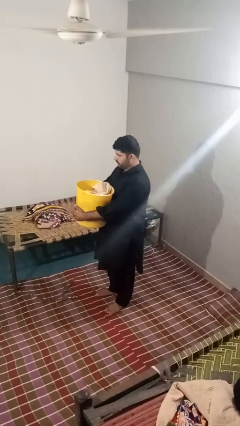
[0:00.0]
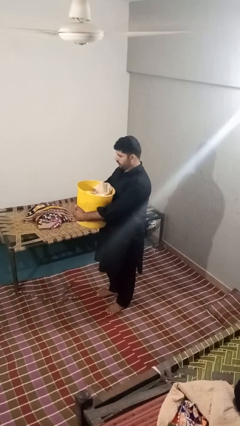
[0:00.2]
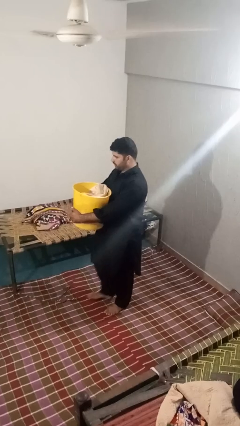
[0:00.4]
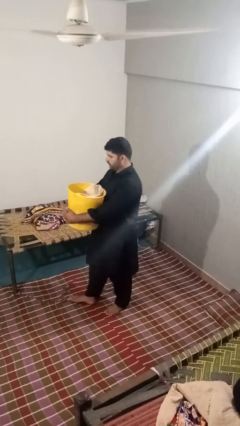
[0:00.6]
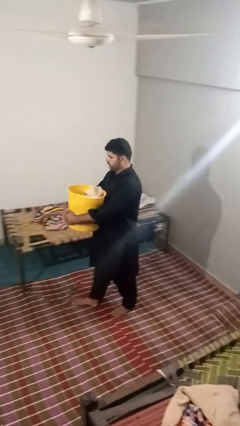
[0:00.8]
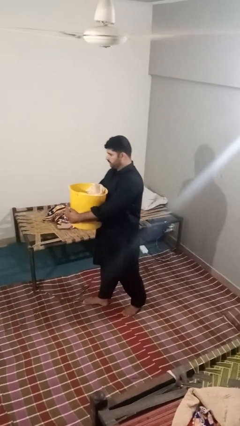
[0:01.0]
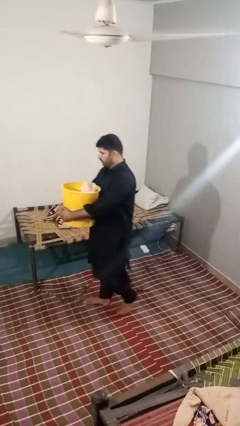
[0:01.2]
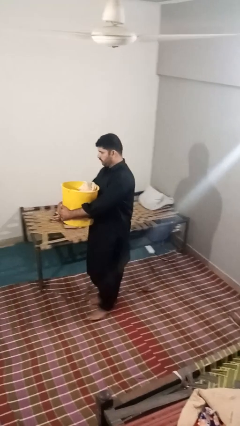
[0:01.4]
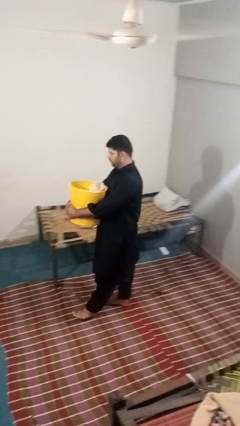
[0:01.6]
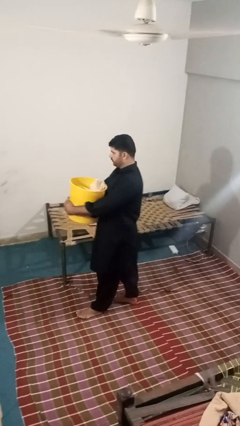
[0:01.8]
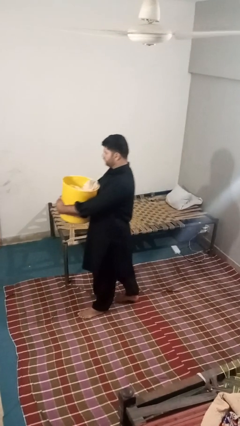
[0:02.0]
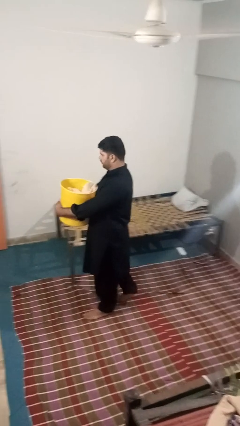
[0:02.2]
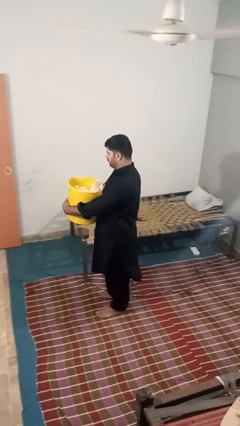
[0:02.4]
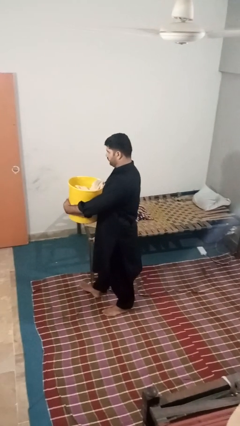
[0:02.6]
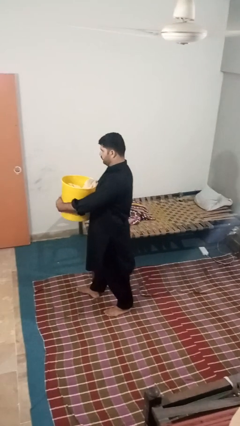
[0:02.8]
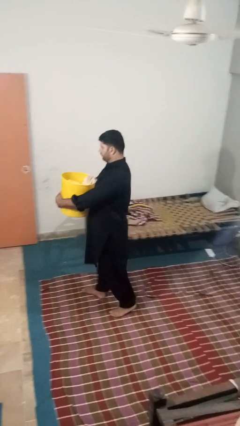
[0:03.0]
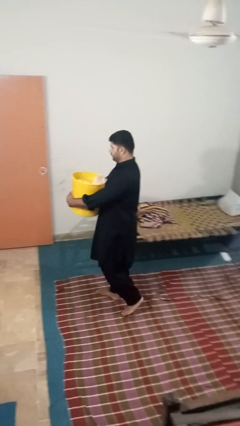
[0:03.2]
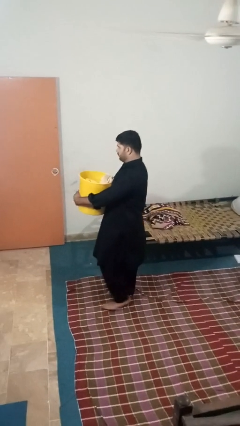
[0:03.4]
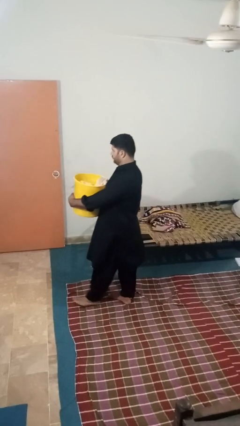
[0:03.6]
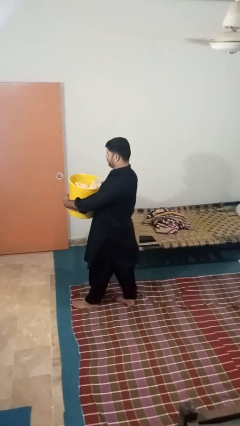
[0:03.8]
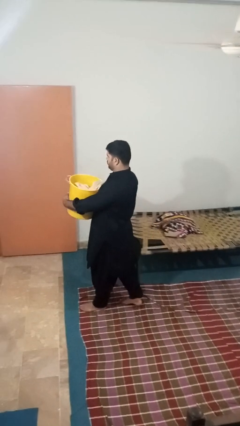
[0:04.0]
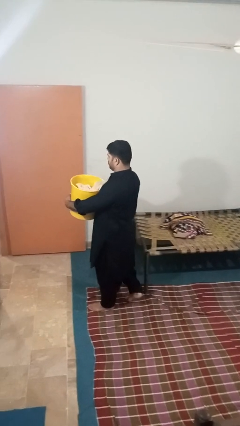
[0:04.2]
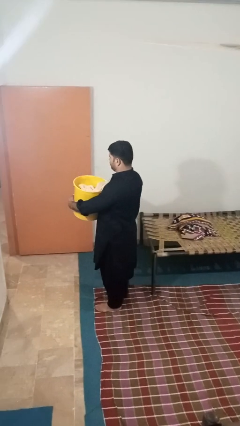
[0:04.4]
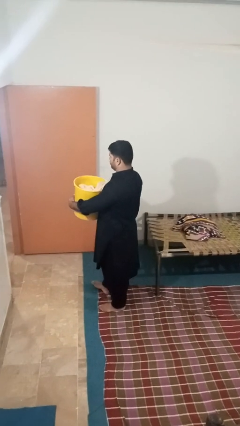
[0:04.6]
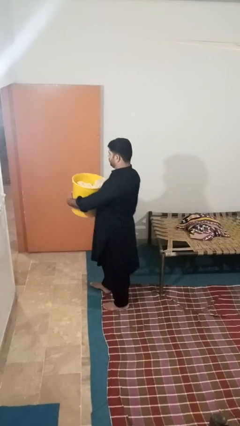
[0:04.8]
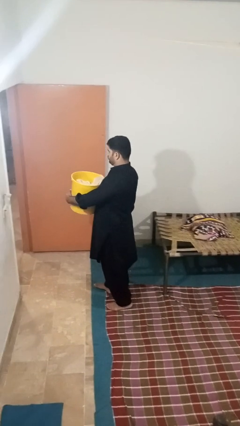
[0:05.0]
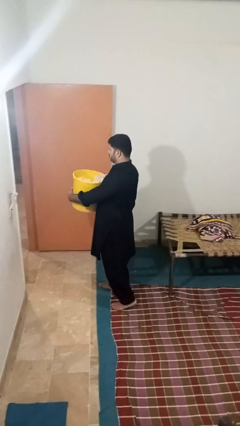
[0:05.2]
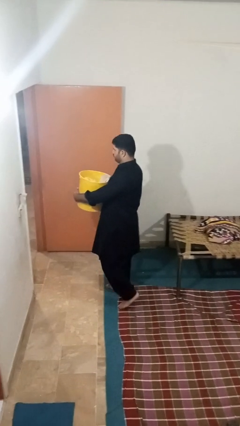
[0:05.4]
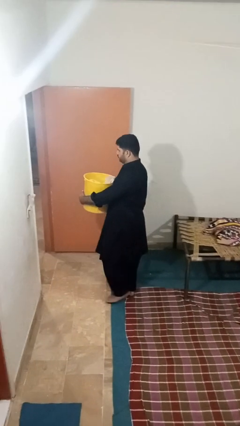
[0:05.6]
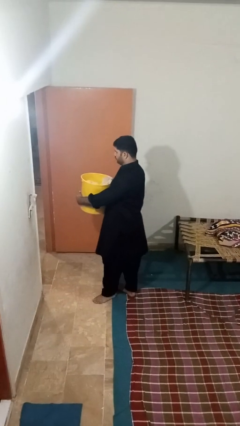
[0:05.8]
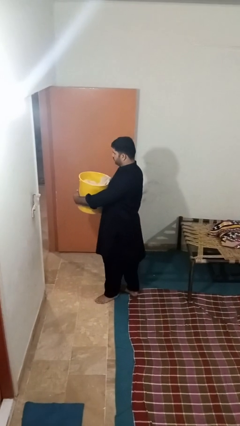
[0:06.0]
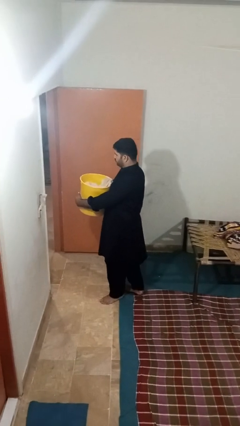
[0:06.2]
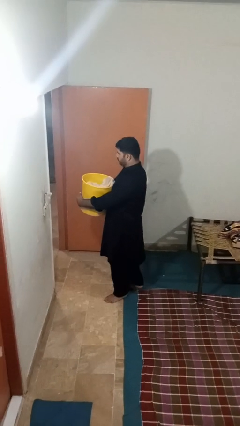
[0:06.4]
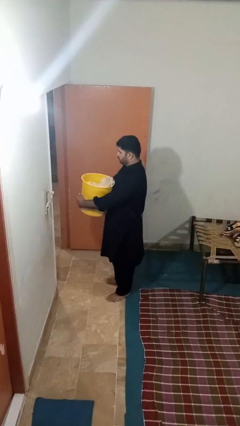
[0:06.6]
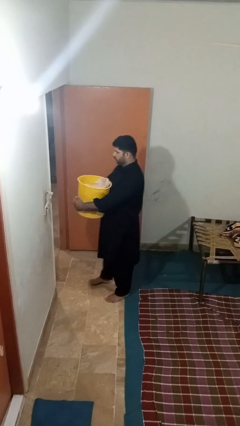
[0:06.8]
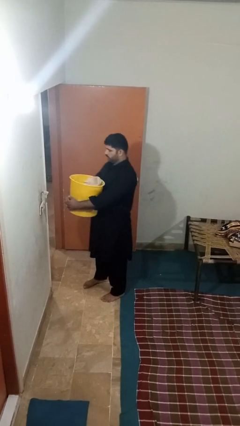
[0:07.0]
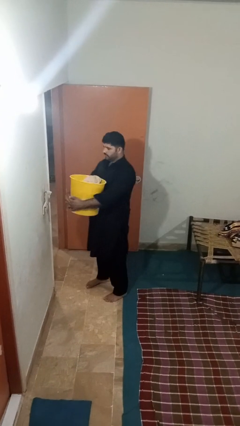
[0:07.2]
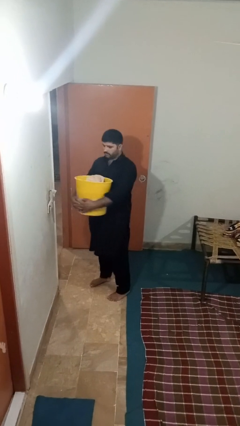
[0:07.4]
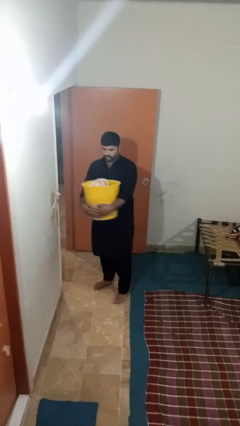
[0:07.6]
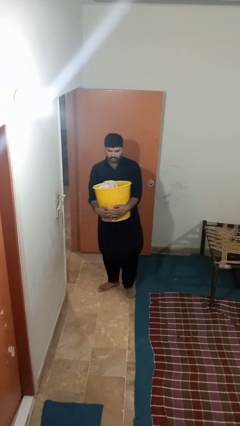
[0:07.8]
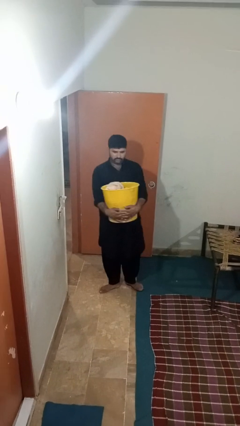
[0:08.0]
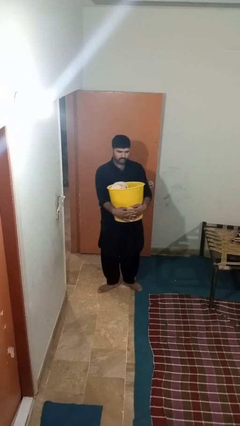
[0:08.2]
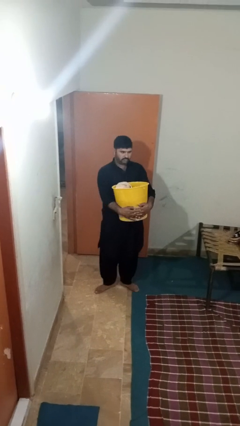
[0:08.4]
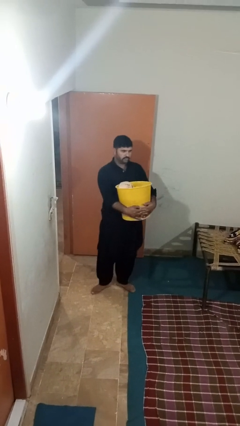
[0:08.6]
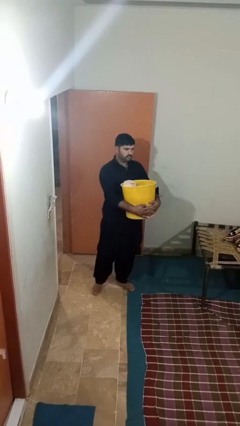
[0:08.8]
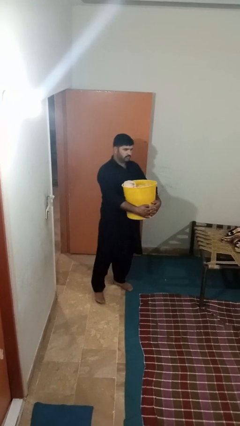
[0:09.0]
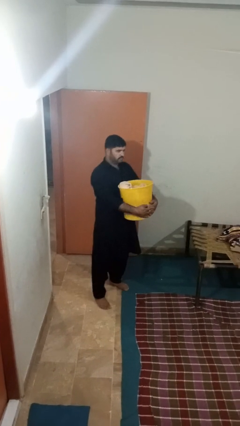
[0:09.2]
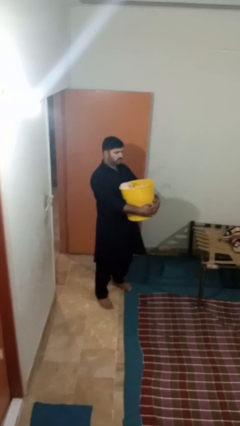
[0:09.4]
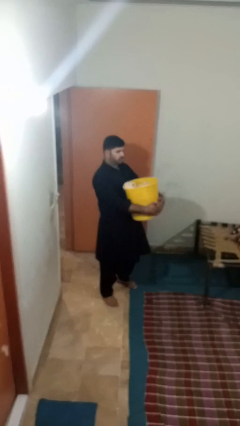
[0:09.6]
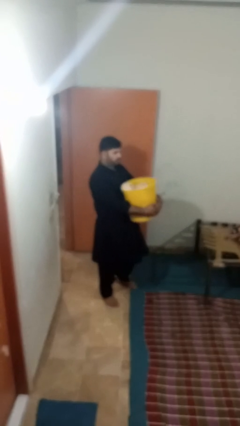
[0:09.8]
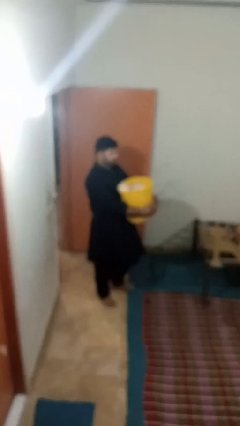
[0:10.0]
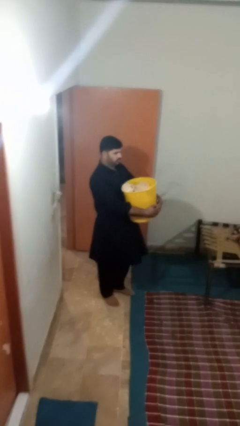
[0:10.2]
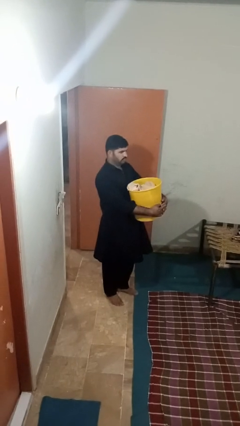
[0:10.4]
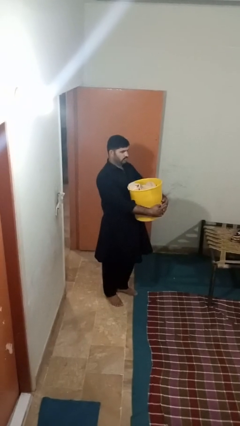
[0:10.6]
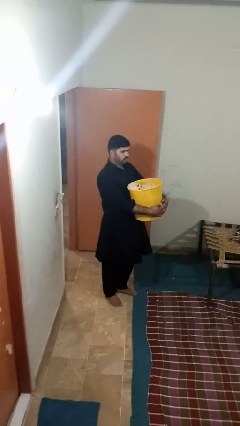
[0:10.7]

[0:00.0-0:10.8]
person carries laundry basket

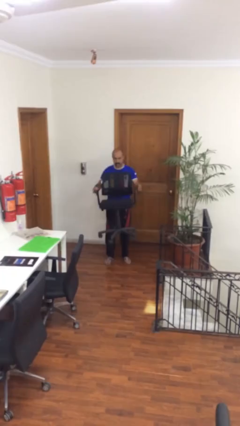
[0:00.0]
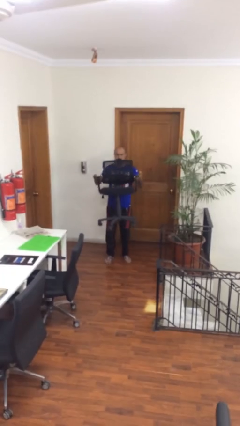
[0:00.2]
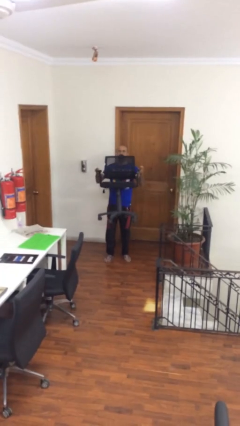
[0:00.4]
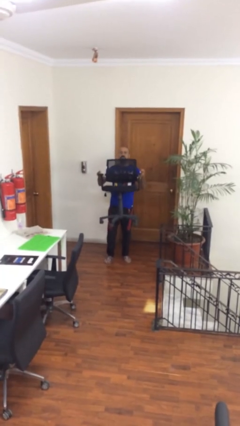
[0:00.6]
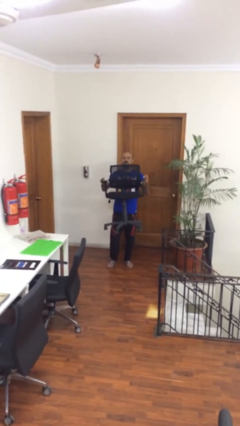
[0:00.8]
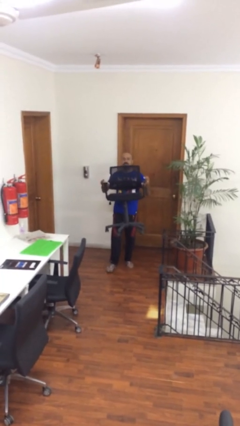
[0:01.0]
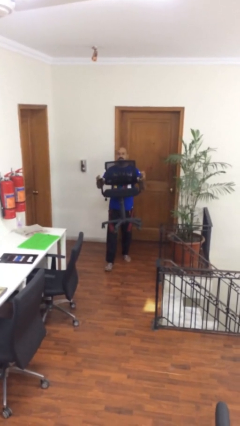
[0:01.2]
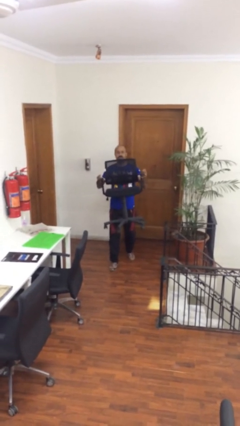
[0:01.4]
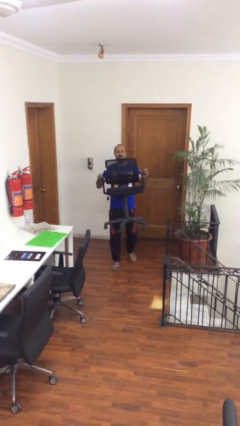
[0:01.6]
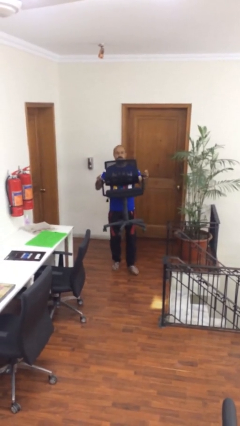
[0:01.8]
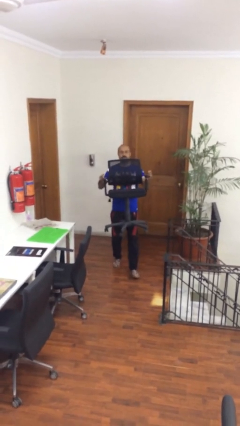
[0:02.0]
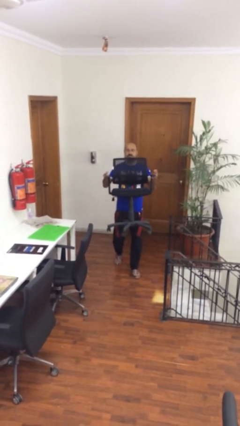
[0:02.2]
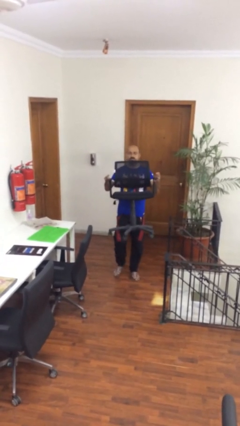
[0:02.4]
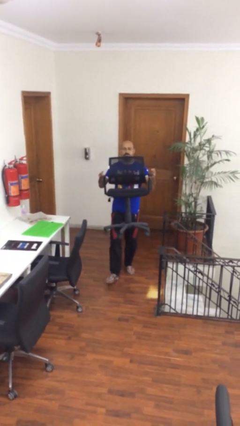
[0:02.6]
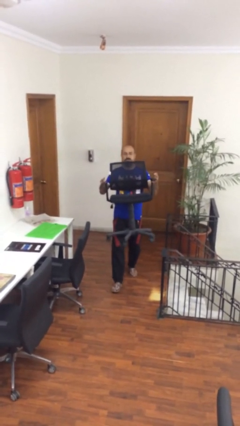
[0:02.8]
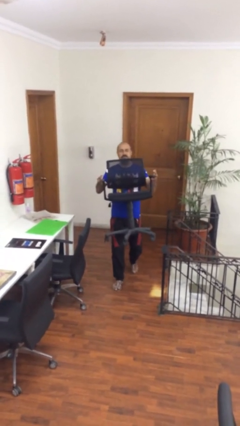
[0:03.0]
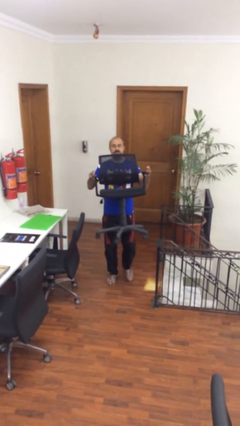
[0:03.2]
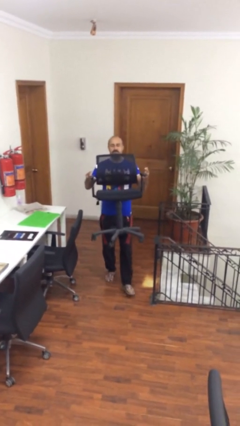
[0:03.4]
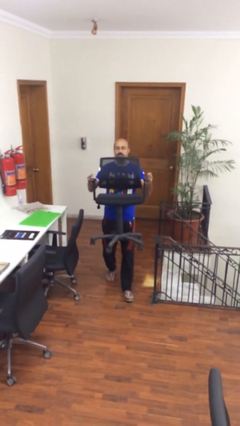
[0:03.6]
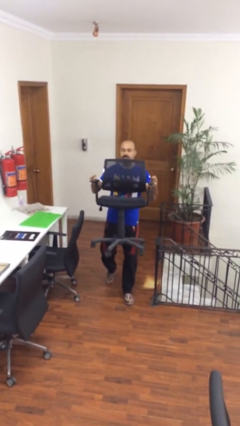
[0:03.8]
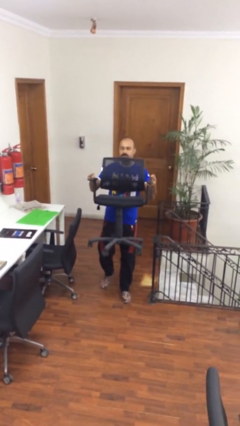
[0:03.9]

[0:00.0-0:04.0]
person carries heavy object

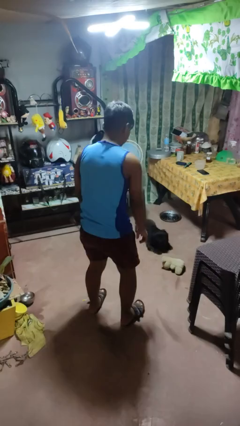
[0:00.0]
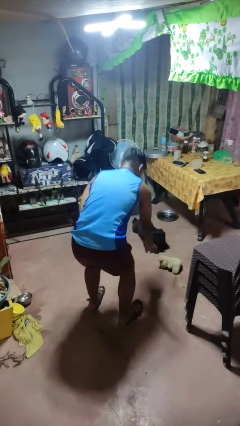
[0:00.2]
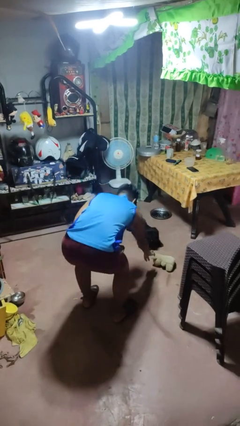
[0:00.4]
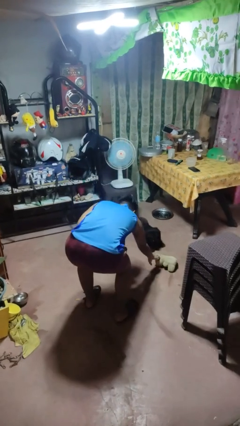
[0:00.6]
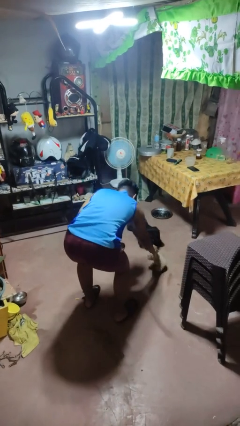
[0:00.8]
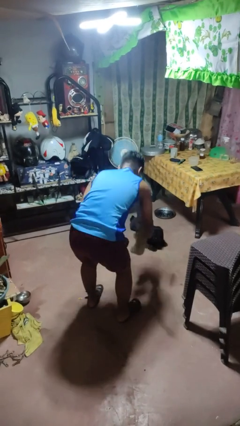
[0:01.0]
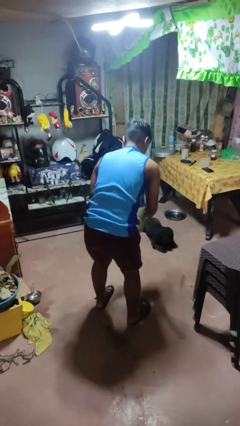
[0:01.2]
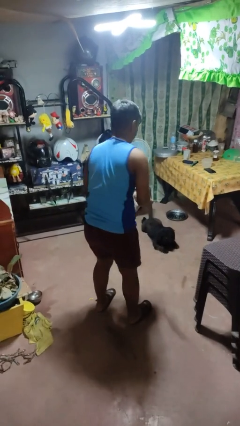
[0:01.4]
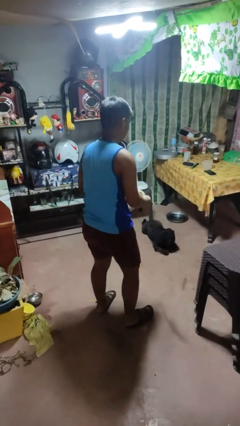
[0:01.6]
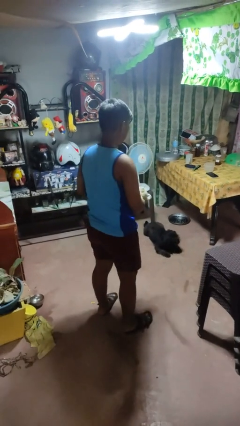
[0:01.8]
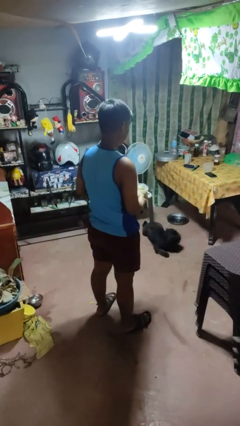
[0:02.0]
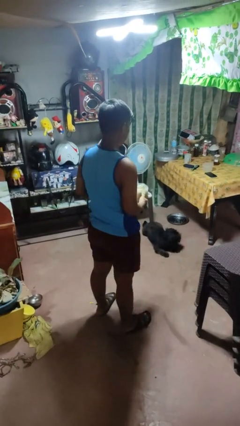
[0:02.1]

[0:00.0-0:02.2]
person picks up object from floor

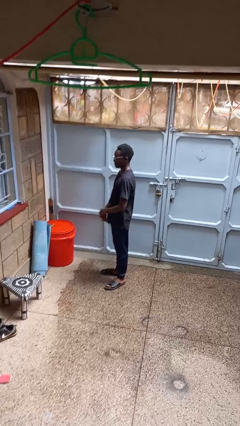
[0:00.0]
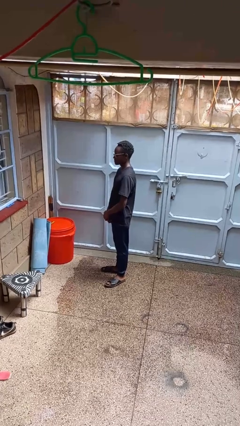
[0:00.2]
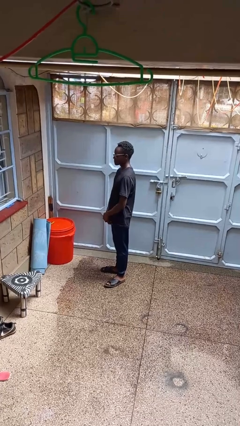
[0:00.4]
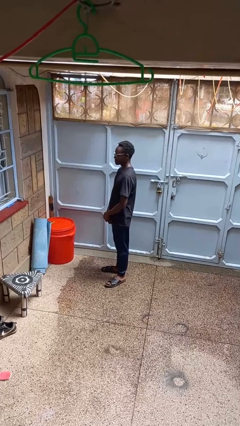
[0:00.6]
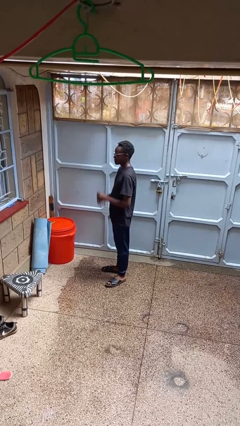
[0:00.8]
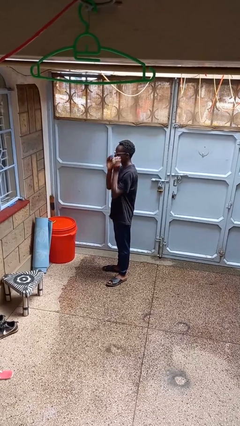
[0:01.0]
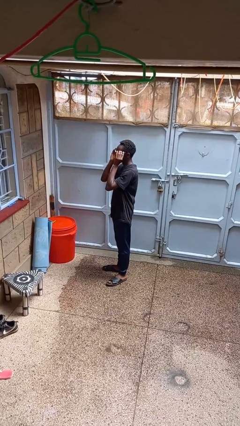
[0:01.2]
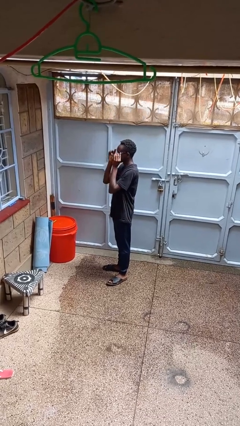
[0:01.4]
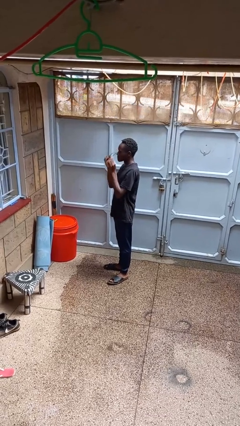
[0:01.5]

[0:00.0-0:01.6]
person takes off glasses
